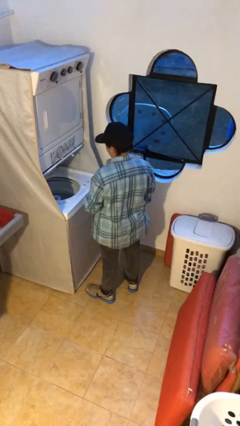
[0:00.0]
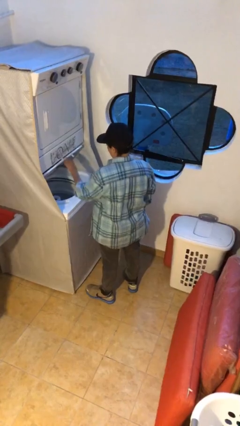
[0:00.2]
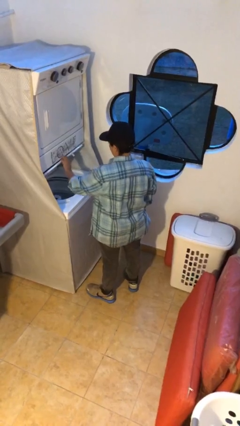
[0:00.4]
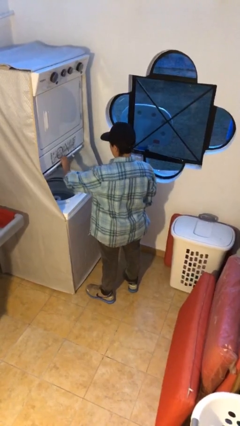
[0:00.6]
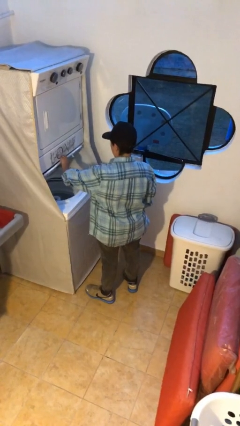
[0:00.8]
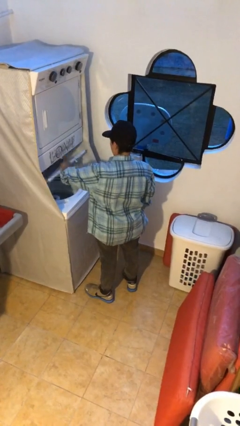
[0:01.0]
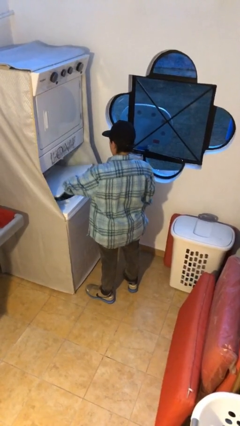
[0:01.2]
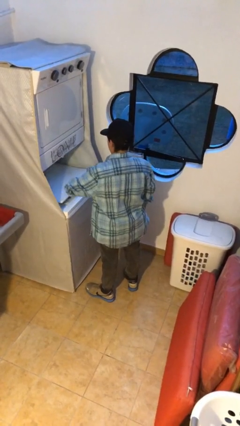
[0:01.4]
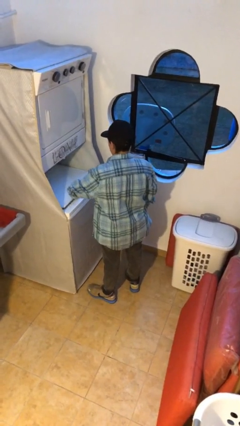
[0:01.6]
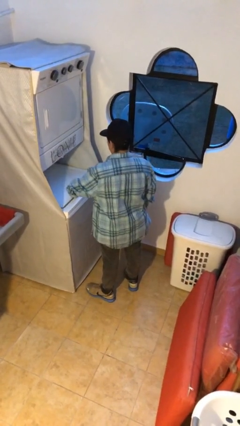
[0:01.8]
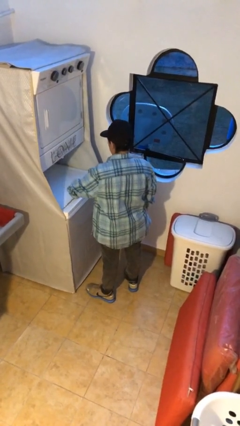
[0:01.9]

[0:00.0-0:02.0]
person closes clothes washer

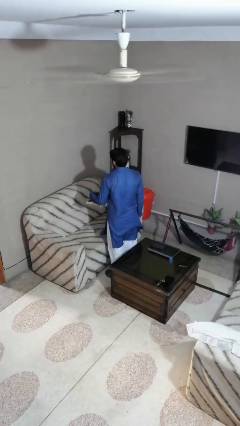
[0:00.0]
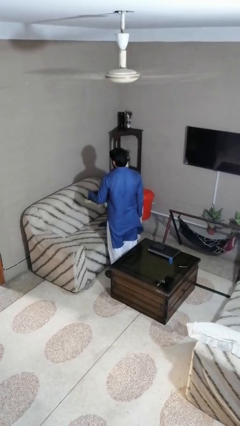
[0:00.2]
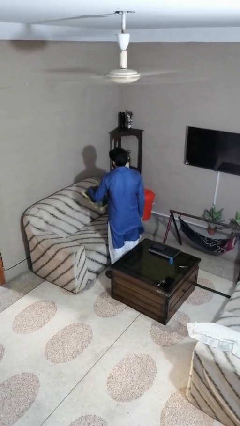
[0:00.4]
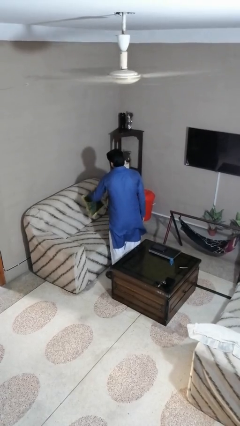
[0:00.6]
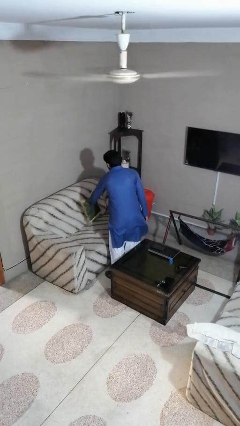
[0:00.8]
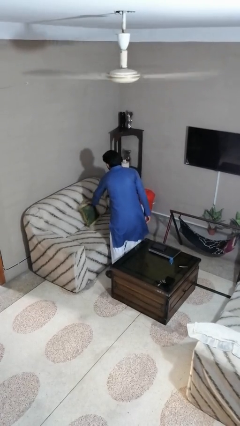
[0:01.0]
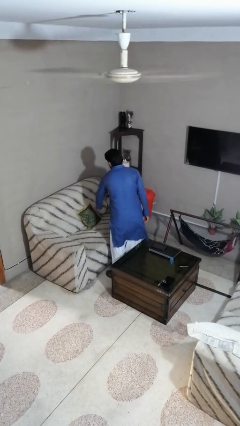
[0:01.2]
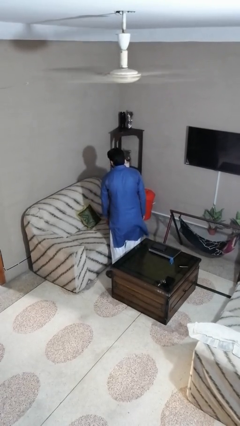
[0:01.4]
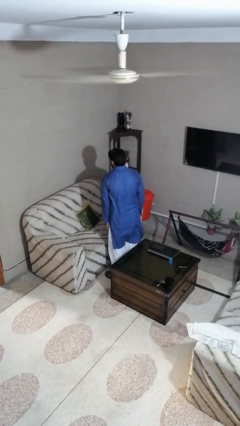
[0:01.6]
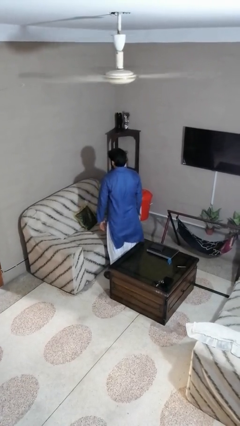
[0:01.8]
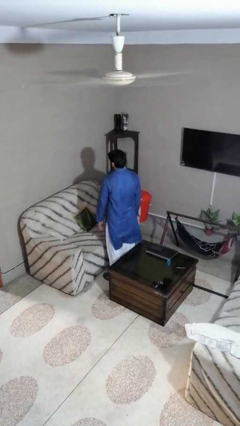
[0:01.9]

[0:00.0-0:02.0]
person puts down object on couch

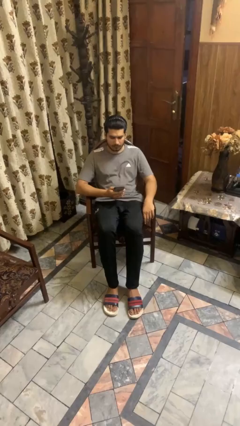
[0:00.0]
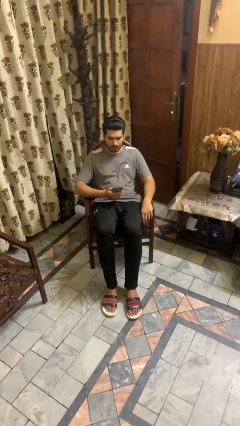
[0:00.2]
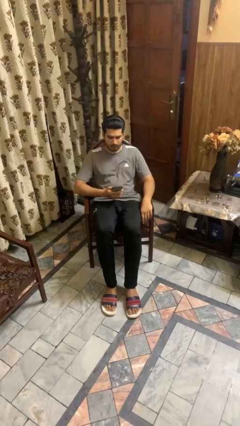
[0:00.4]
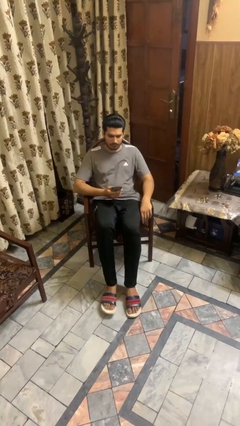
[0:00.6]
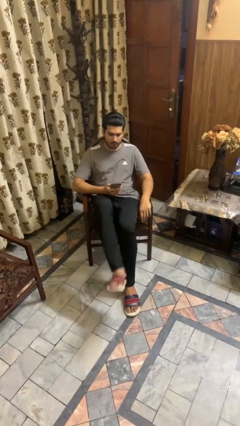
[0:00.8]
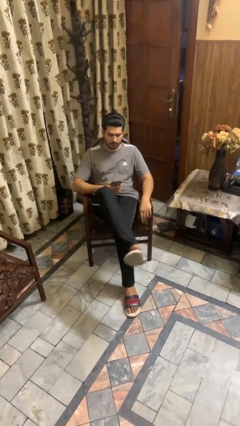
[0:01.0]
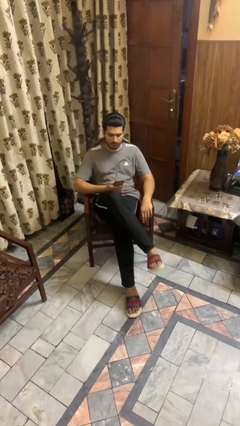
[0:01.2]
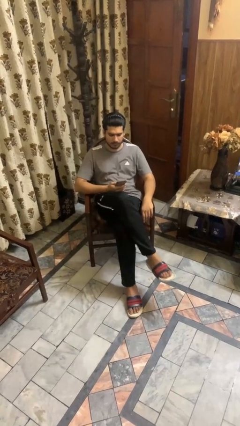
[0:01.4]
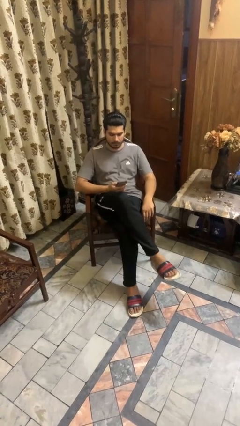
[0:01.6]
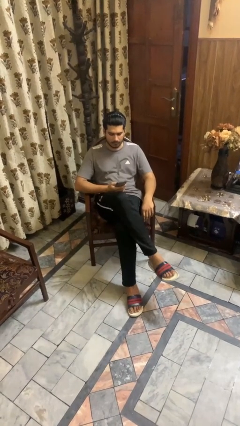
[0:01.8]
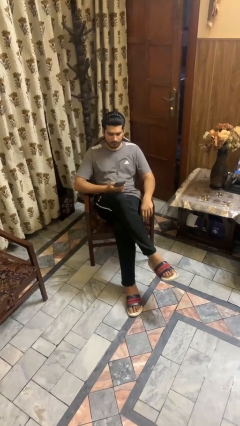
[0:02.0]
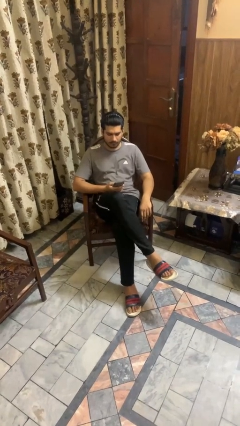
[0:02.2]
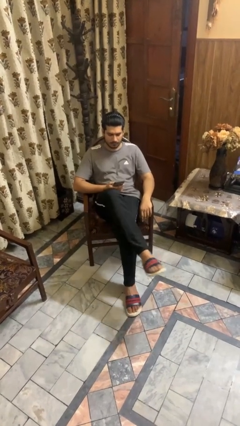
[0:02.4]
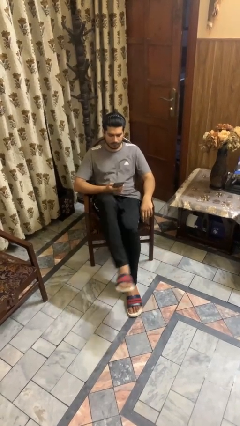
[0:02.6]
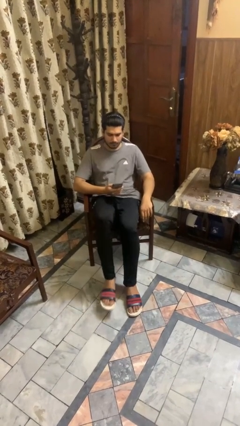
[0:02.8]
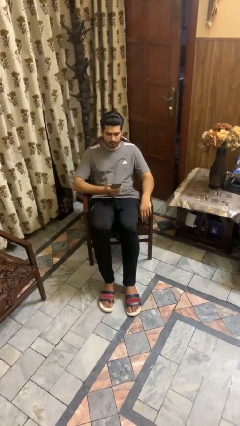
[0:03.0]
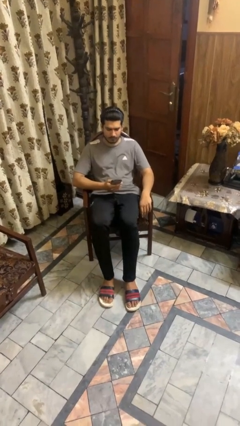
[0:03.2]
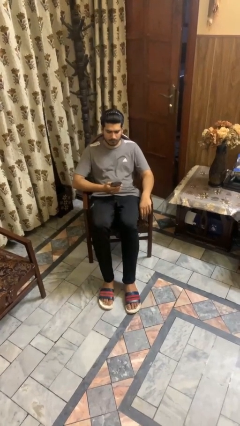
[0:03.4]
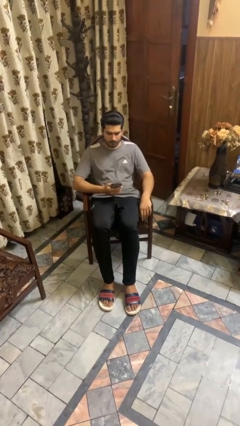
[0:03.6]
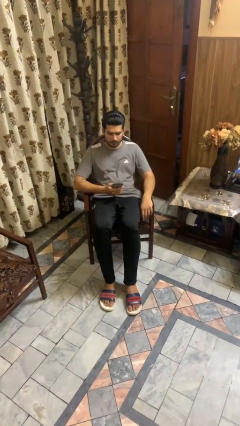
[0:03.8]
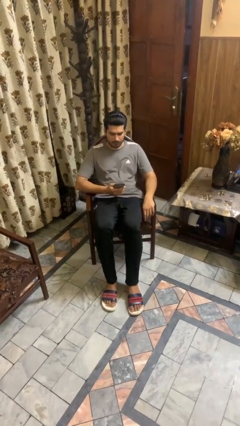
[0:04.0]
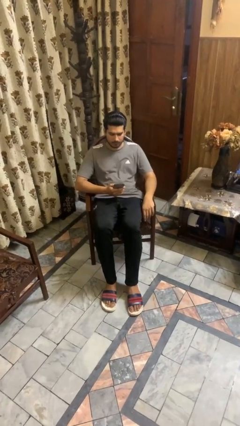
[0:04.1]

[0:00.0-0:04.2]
person crosses legs

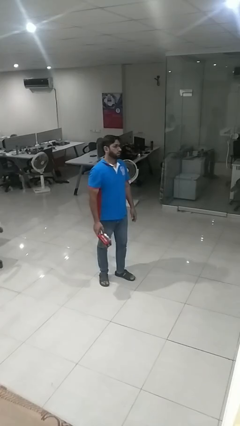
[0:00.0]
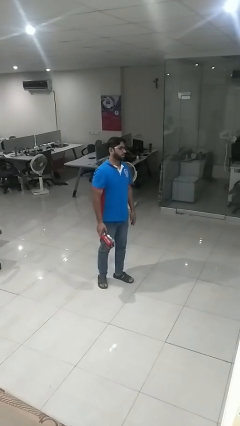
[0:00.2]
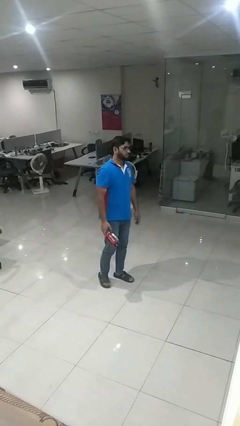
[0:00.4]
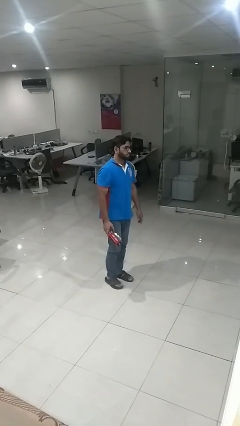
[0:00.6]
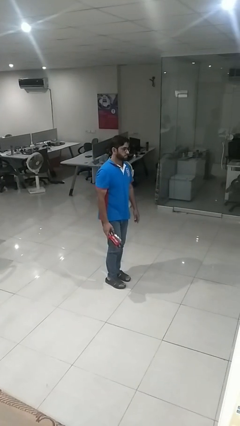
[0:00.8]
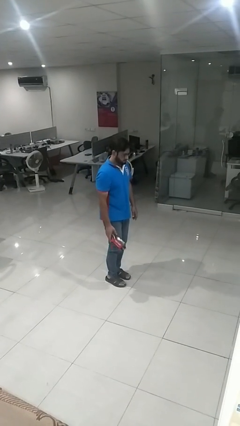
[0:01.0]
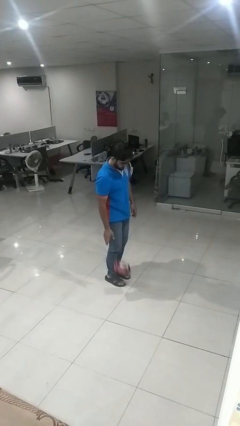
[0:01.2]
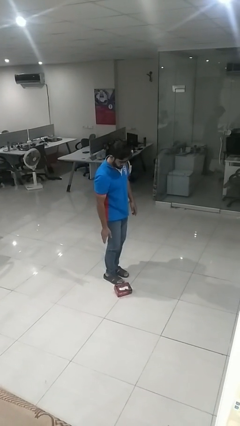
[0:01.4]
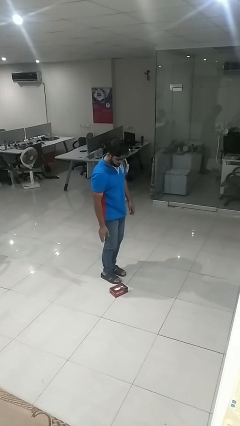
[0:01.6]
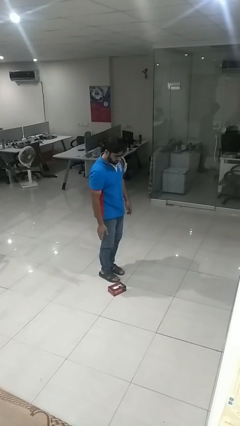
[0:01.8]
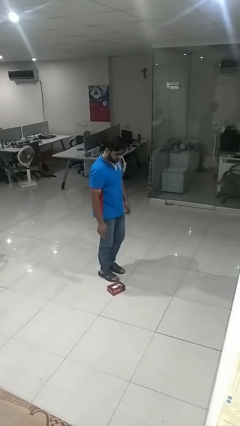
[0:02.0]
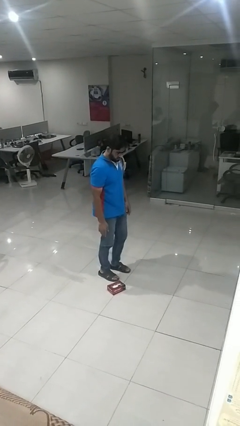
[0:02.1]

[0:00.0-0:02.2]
person drops object

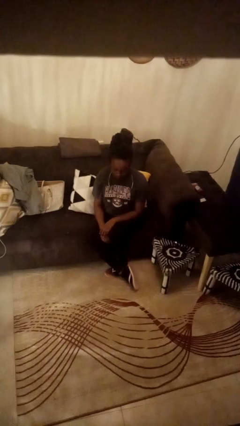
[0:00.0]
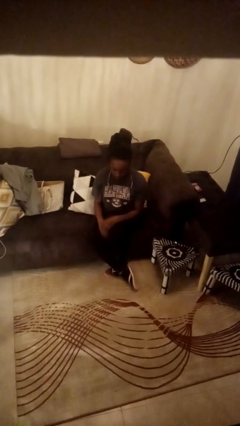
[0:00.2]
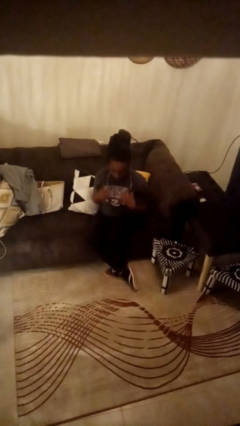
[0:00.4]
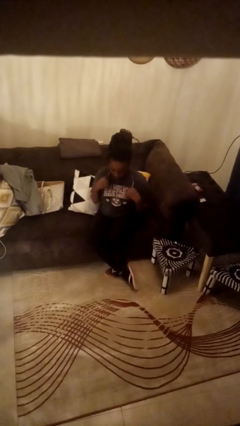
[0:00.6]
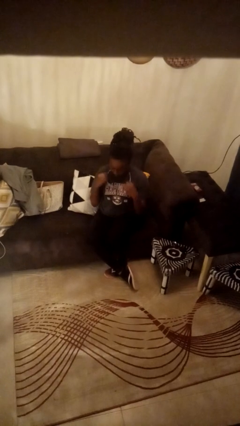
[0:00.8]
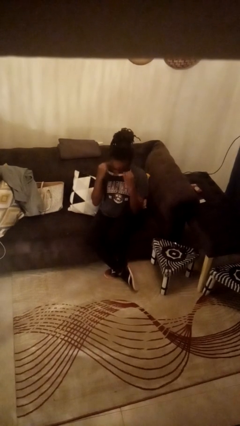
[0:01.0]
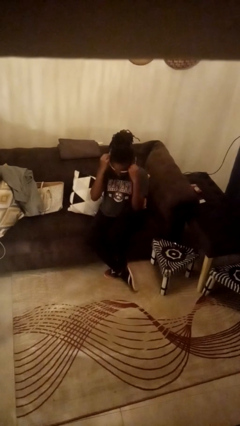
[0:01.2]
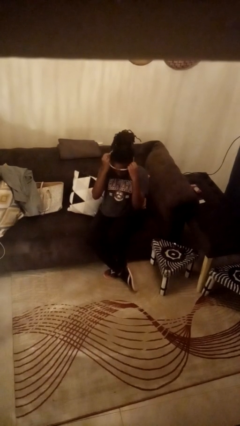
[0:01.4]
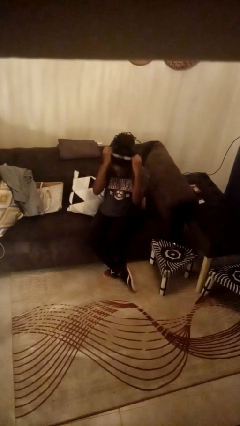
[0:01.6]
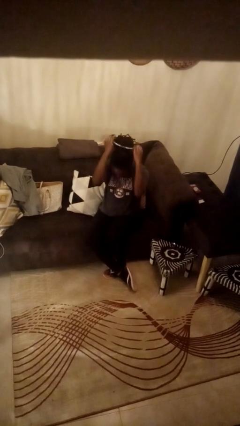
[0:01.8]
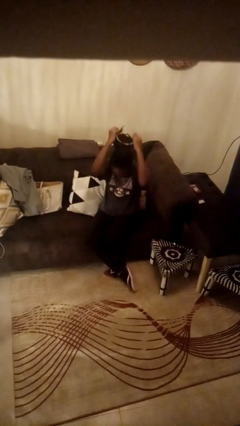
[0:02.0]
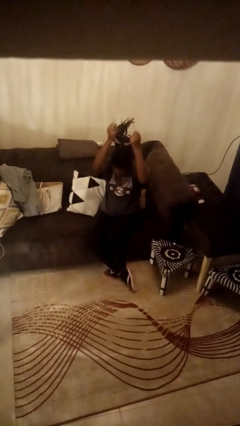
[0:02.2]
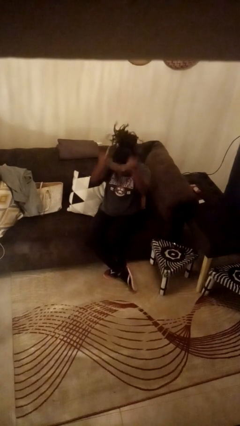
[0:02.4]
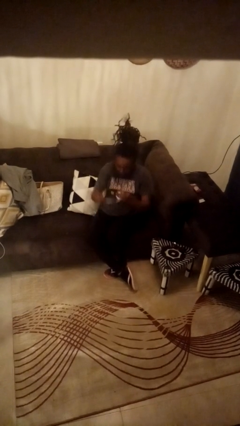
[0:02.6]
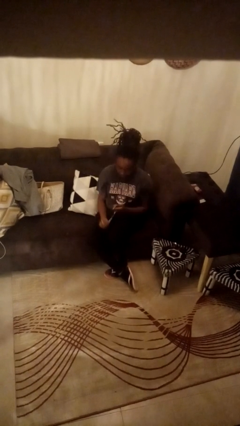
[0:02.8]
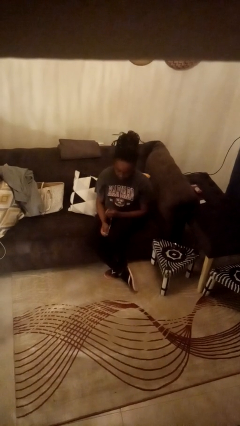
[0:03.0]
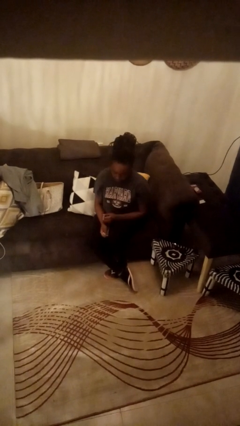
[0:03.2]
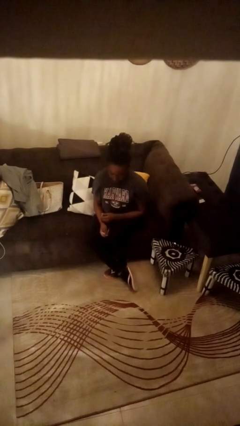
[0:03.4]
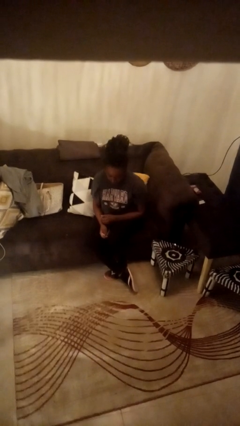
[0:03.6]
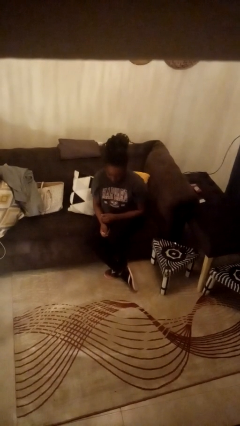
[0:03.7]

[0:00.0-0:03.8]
person takes off necklace

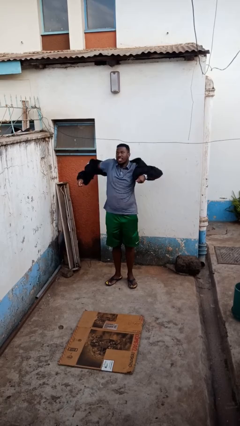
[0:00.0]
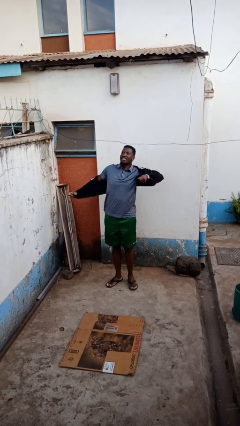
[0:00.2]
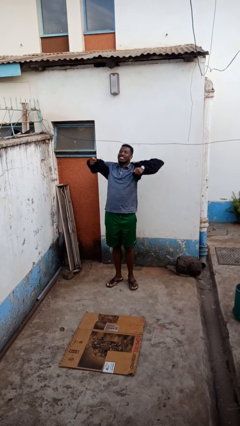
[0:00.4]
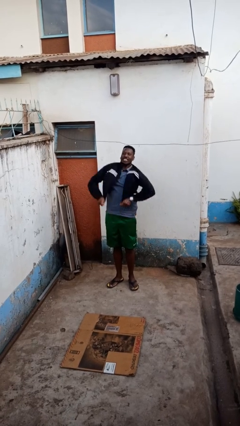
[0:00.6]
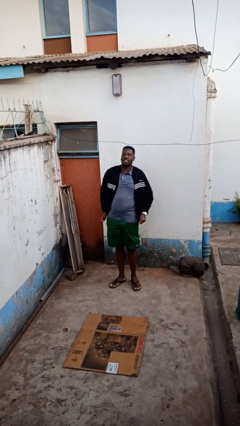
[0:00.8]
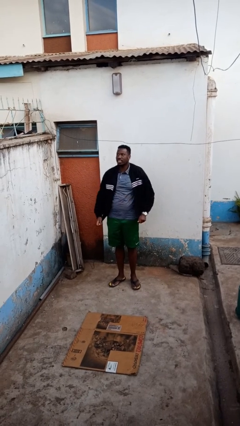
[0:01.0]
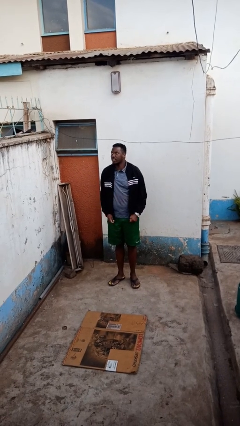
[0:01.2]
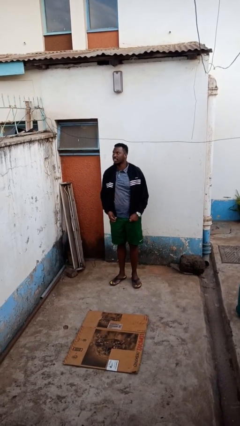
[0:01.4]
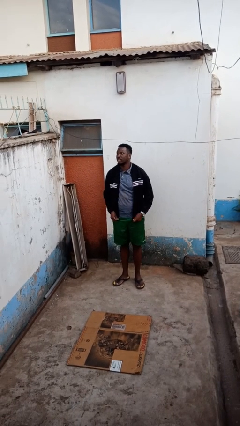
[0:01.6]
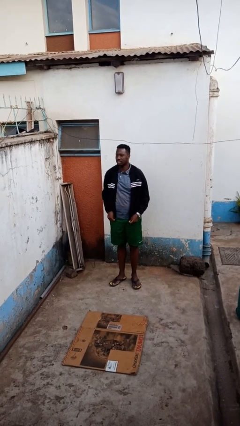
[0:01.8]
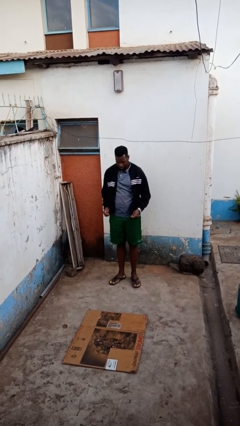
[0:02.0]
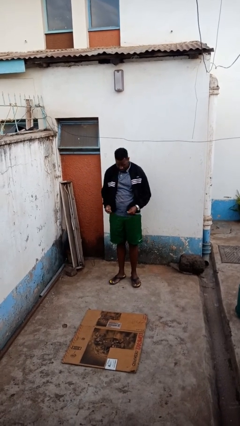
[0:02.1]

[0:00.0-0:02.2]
person puts on jacket

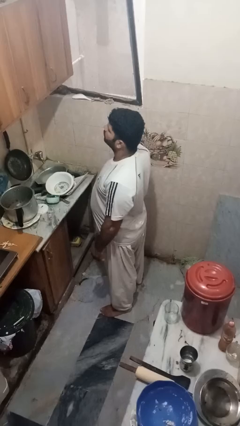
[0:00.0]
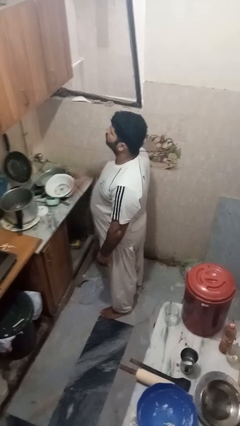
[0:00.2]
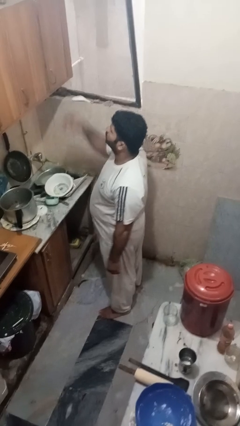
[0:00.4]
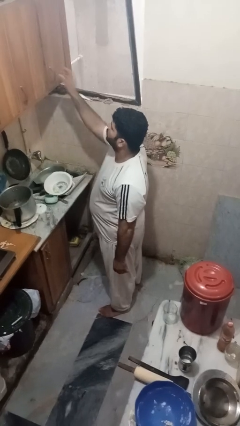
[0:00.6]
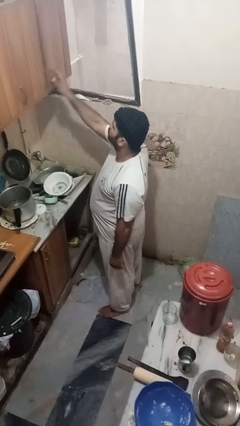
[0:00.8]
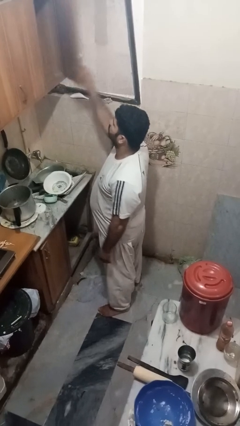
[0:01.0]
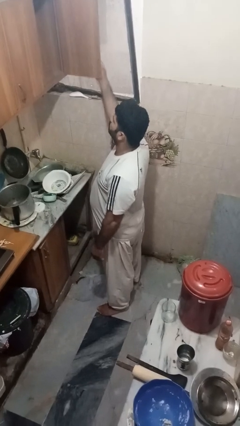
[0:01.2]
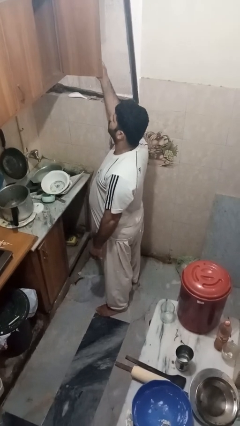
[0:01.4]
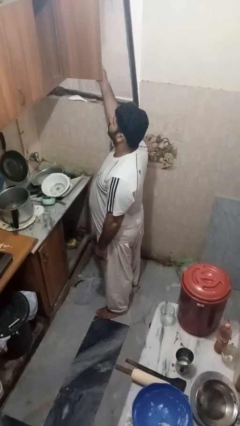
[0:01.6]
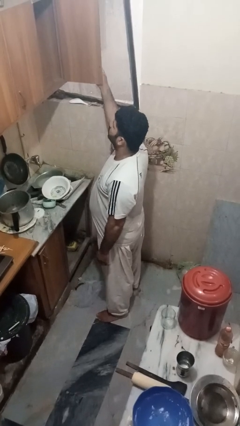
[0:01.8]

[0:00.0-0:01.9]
person opens cabinet
